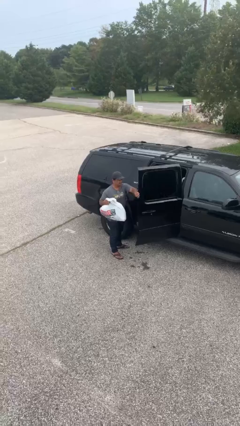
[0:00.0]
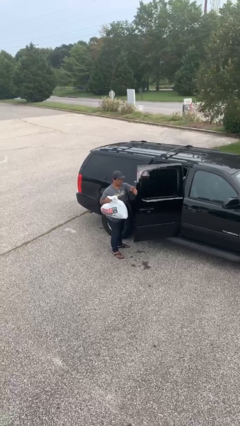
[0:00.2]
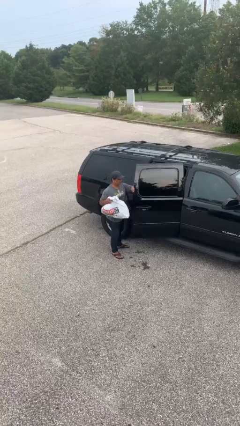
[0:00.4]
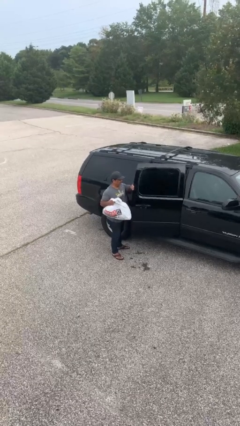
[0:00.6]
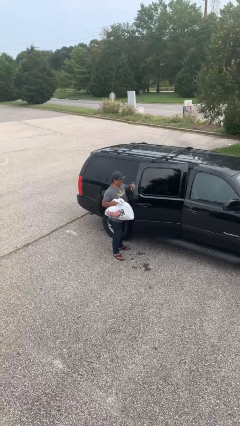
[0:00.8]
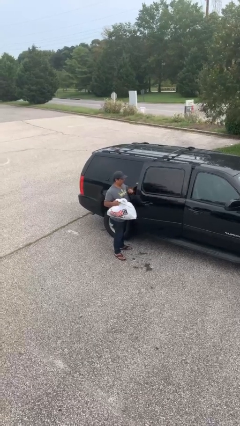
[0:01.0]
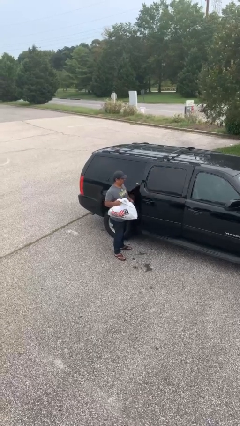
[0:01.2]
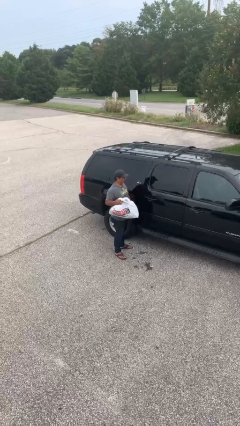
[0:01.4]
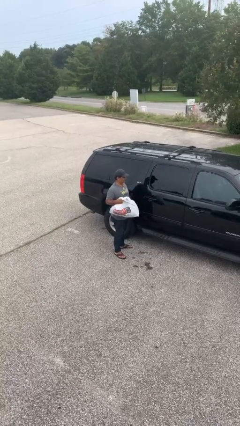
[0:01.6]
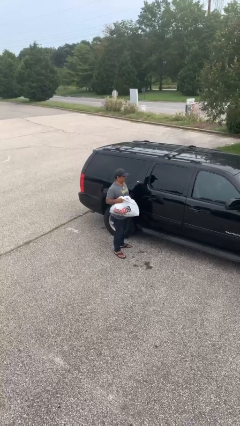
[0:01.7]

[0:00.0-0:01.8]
person closes car door

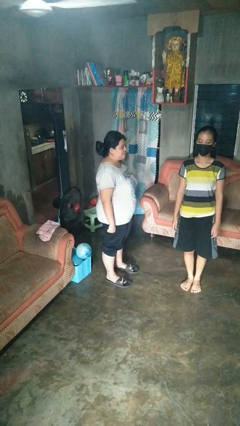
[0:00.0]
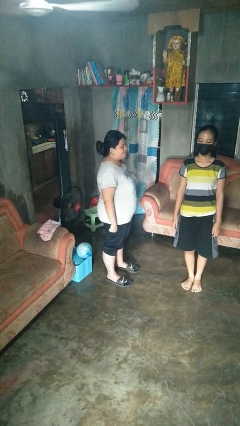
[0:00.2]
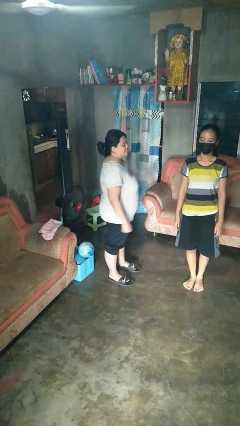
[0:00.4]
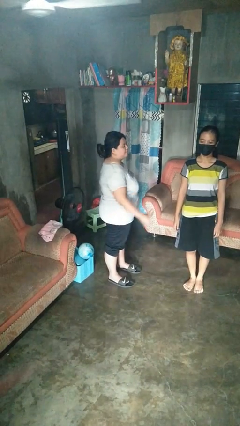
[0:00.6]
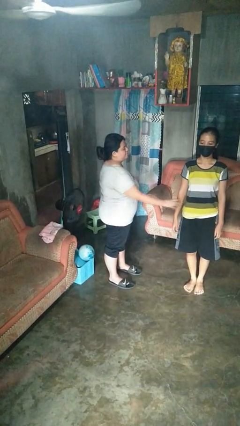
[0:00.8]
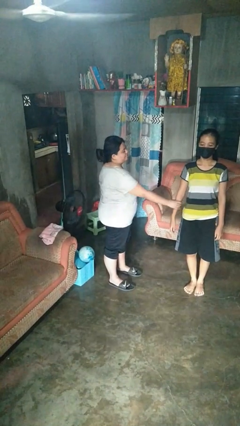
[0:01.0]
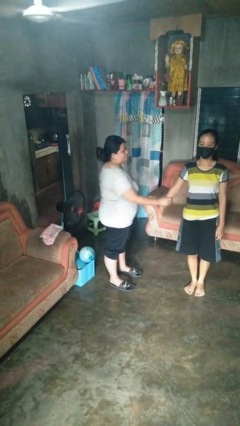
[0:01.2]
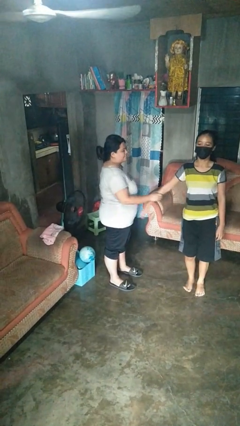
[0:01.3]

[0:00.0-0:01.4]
person grabs person by forearm

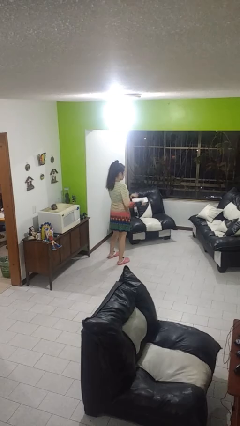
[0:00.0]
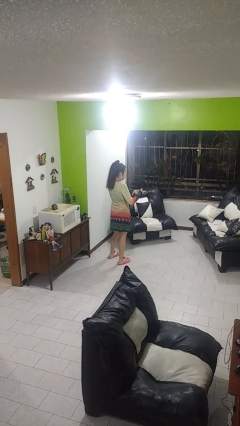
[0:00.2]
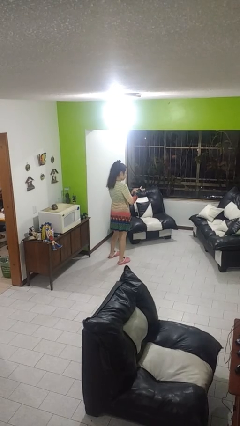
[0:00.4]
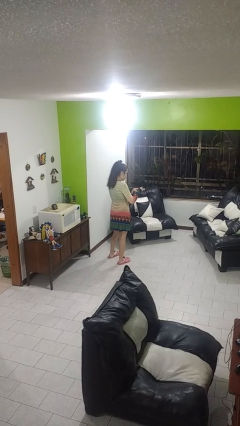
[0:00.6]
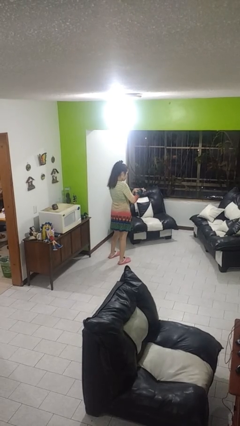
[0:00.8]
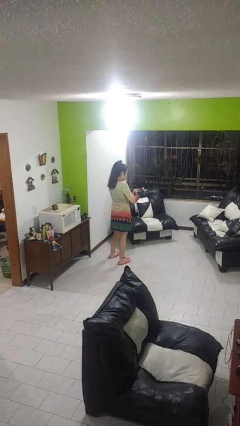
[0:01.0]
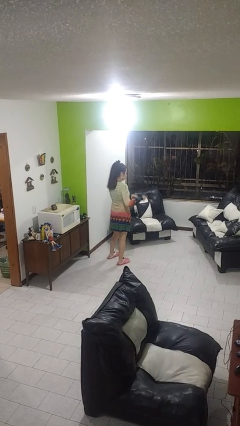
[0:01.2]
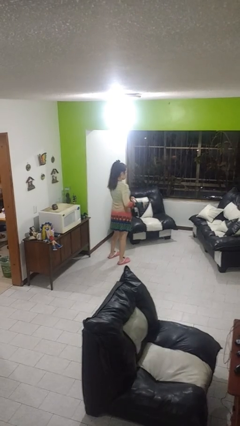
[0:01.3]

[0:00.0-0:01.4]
person clips fingernails

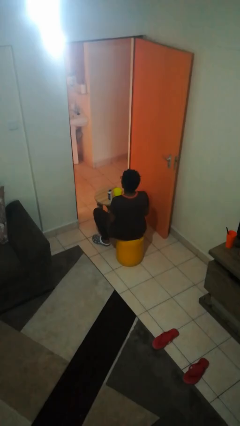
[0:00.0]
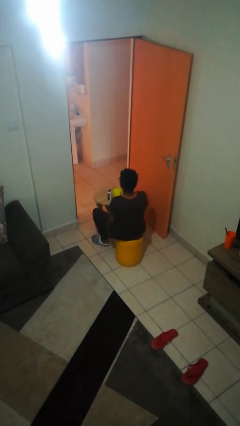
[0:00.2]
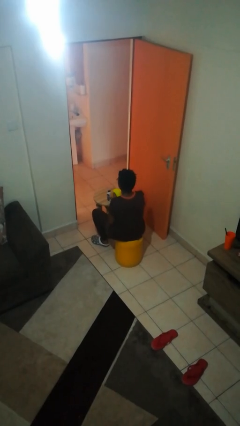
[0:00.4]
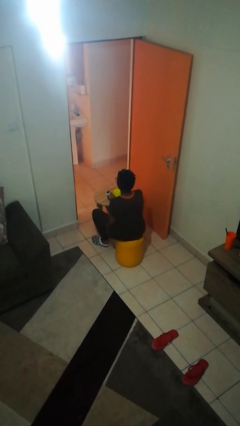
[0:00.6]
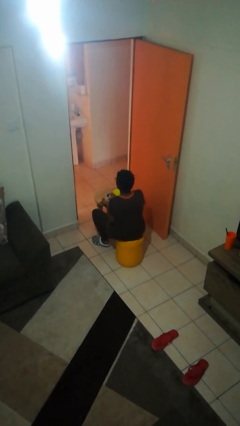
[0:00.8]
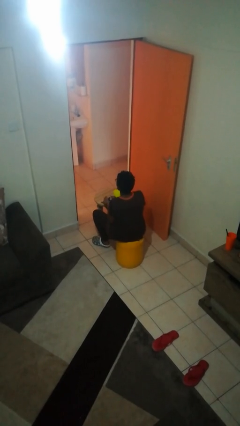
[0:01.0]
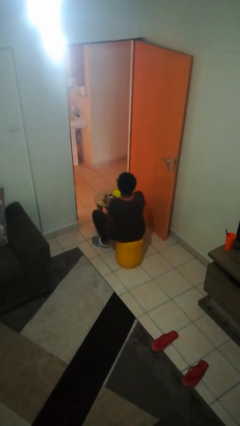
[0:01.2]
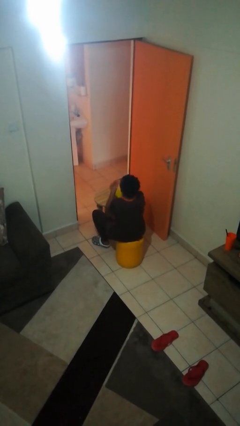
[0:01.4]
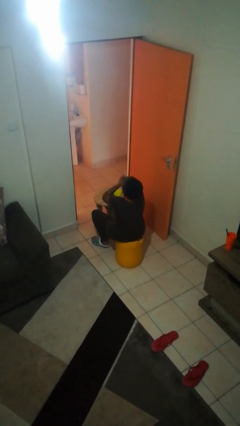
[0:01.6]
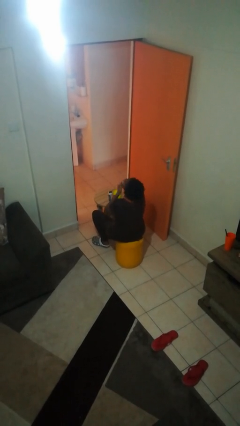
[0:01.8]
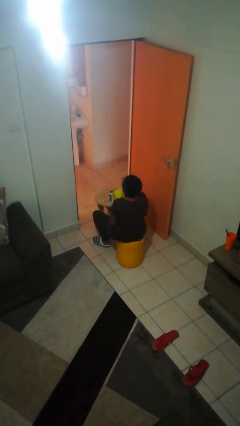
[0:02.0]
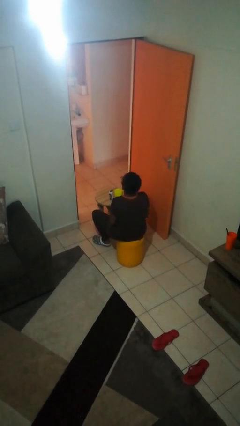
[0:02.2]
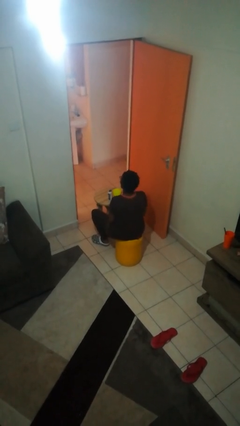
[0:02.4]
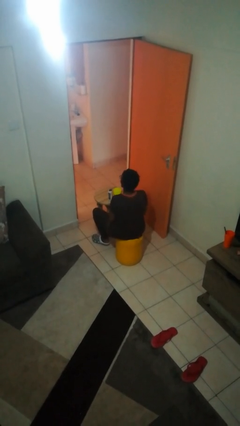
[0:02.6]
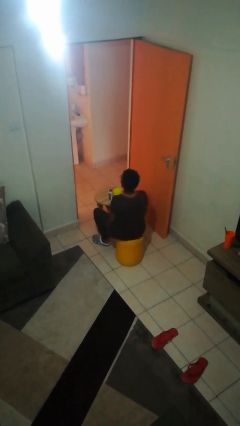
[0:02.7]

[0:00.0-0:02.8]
person takes medicine pills

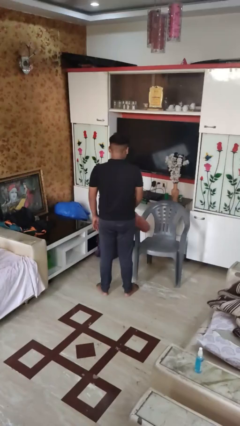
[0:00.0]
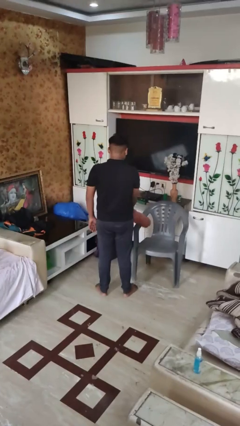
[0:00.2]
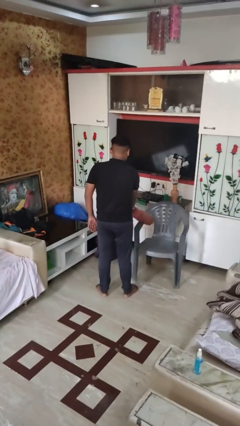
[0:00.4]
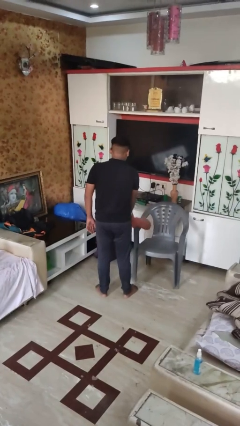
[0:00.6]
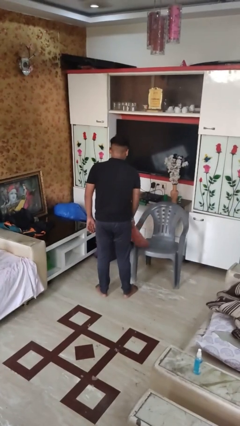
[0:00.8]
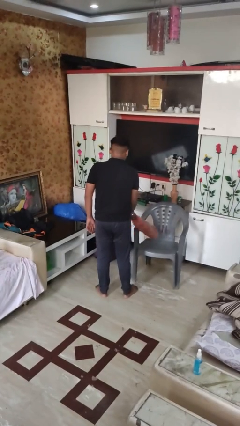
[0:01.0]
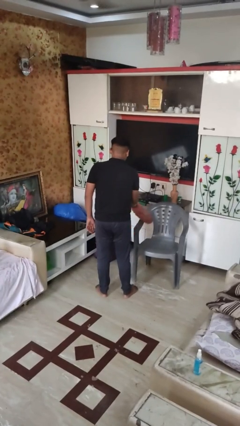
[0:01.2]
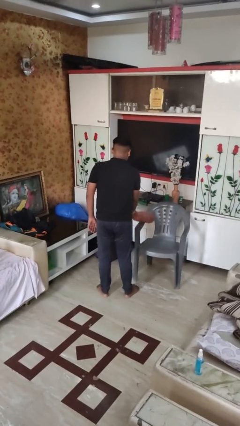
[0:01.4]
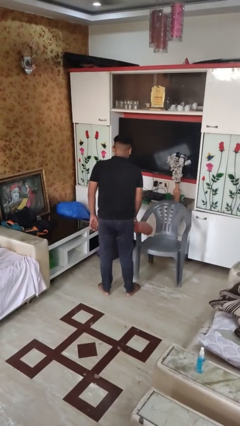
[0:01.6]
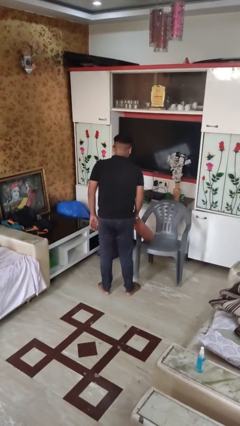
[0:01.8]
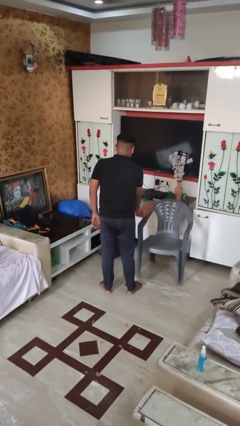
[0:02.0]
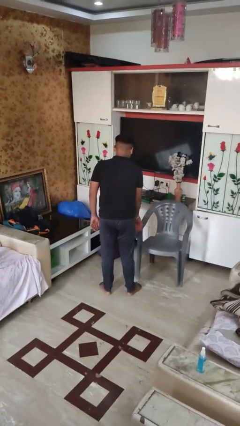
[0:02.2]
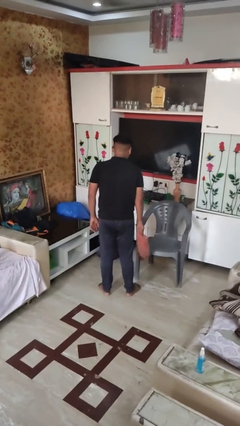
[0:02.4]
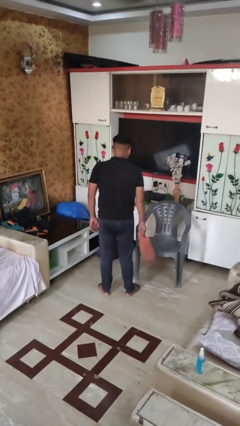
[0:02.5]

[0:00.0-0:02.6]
person dusts furniture

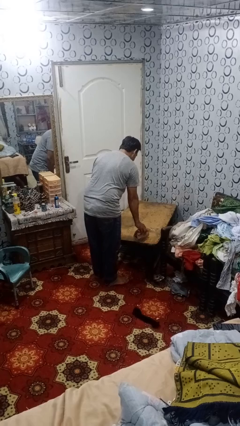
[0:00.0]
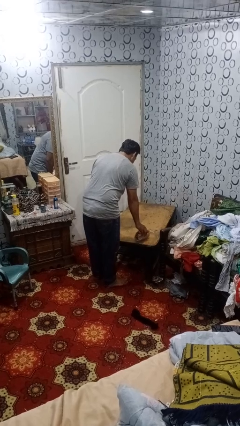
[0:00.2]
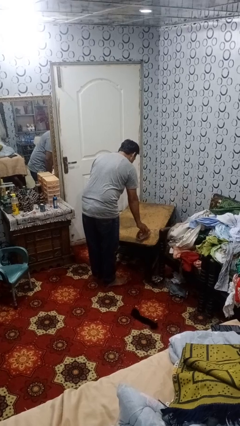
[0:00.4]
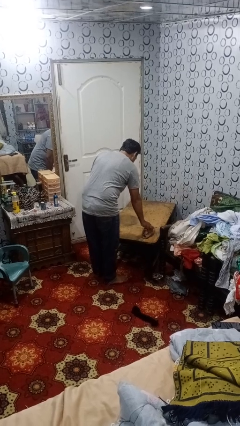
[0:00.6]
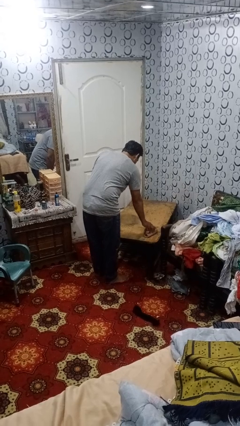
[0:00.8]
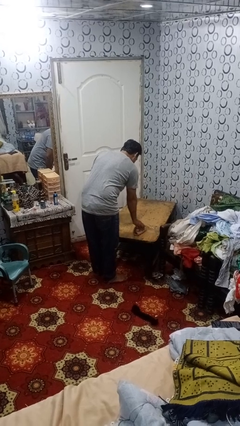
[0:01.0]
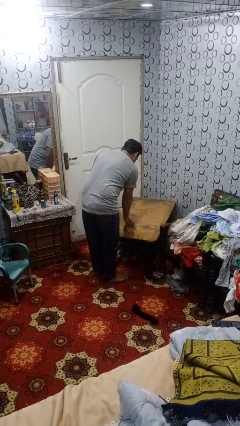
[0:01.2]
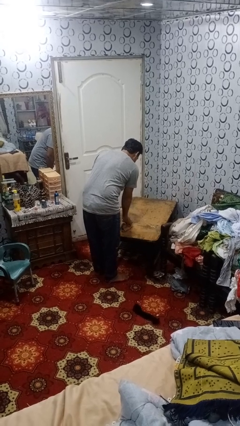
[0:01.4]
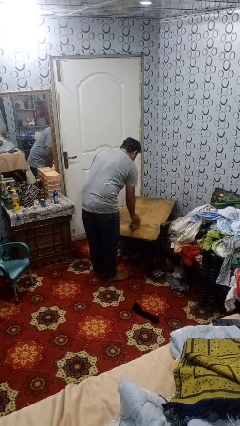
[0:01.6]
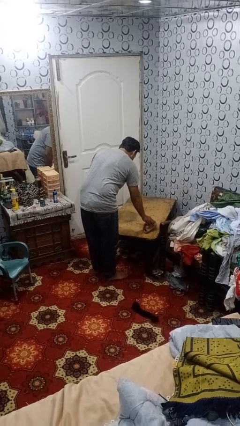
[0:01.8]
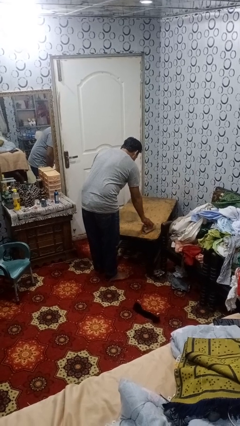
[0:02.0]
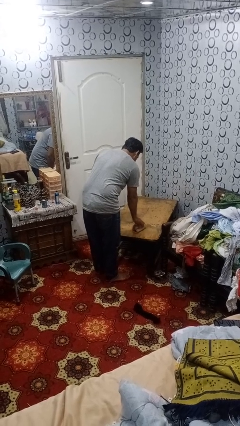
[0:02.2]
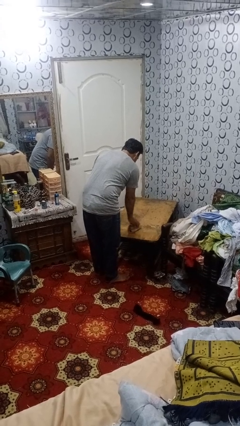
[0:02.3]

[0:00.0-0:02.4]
person cleans table with rag

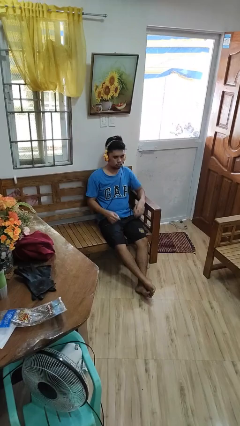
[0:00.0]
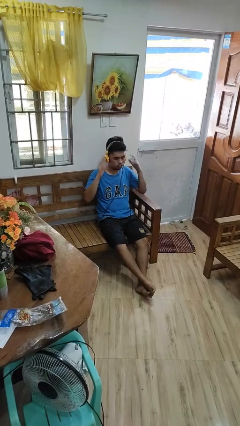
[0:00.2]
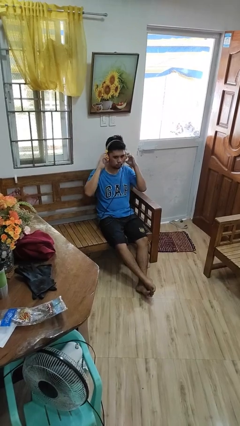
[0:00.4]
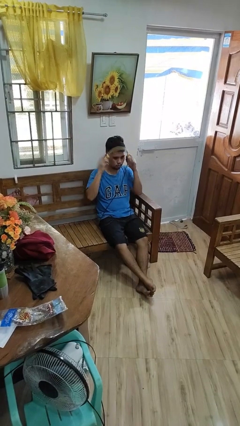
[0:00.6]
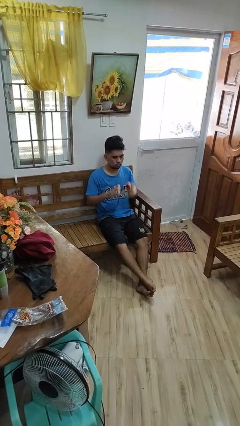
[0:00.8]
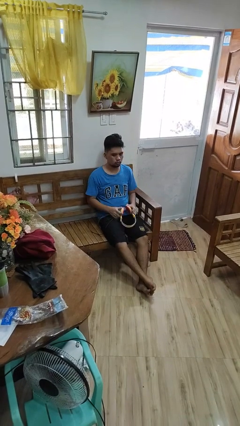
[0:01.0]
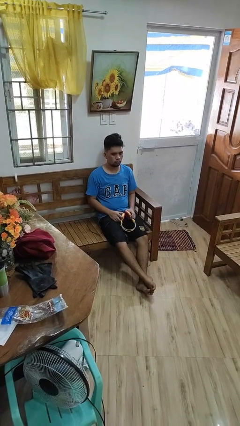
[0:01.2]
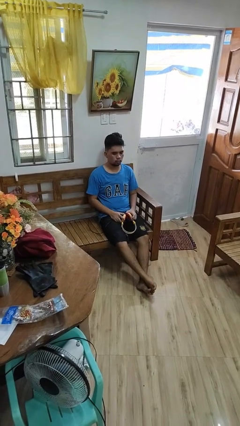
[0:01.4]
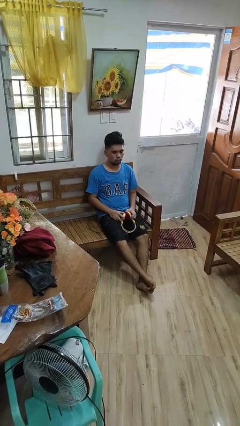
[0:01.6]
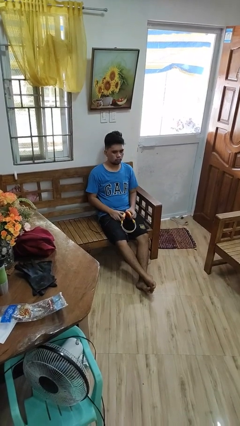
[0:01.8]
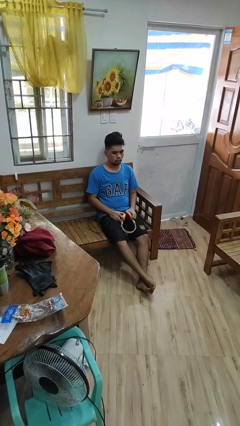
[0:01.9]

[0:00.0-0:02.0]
person takes off headphones

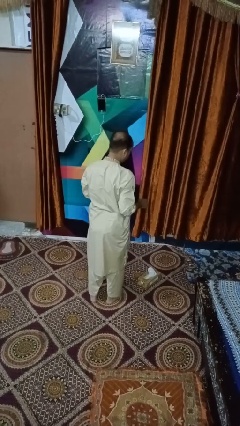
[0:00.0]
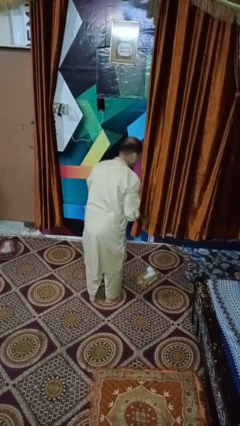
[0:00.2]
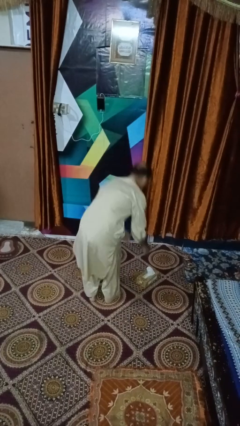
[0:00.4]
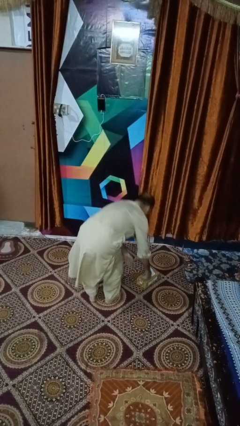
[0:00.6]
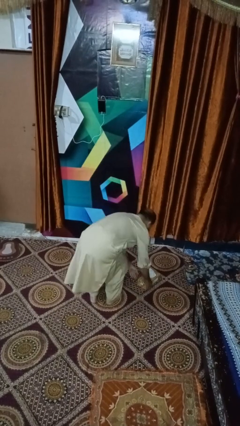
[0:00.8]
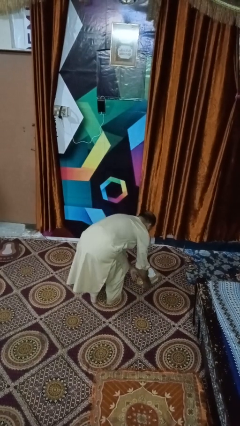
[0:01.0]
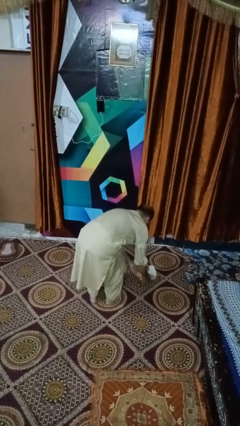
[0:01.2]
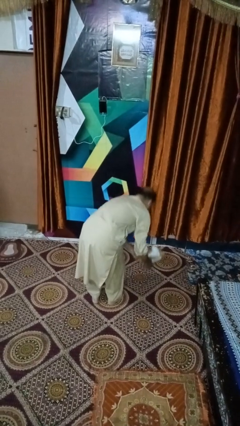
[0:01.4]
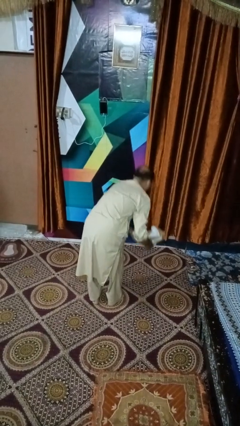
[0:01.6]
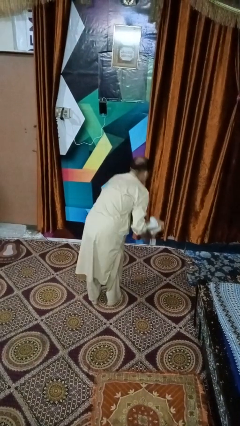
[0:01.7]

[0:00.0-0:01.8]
person picks up object from floor
